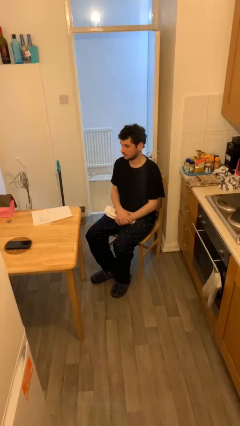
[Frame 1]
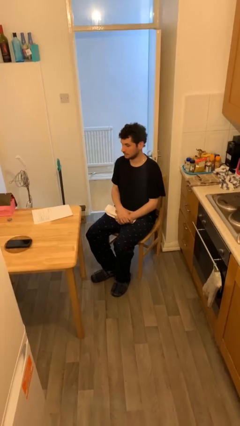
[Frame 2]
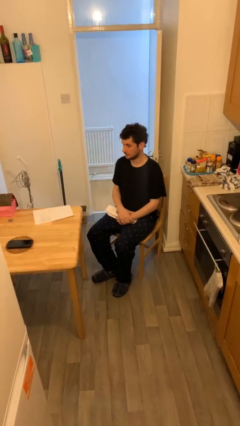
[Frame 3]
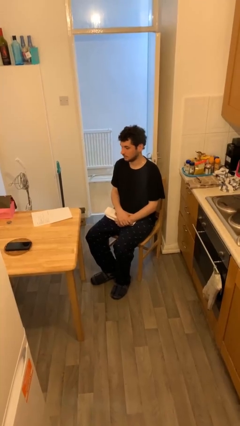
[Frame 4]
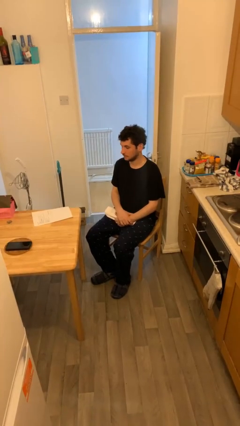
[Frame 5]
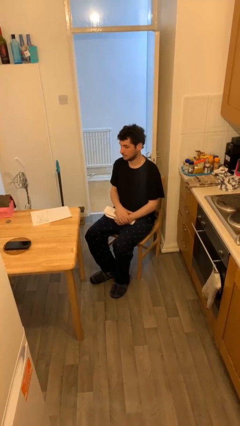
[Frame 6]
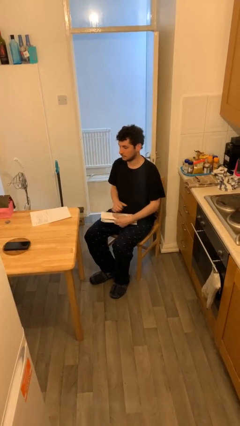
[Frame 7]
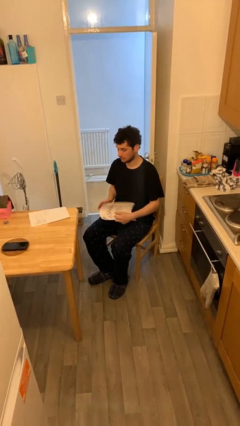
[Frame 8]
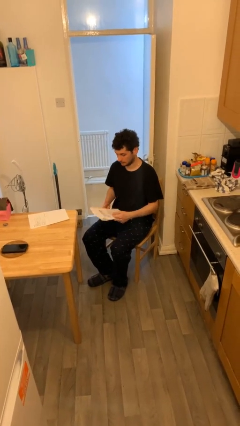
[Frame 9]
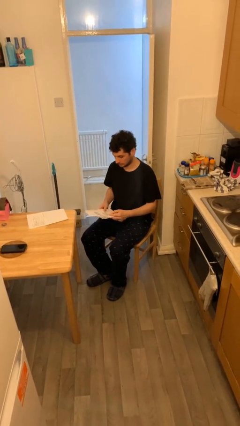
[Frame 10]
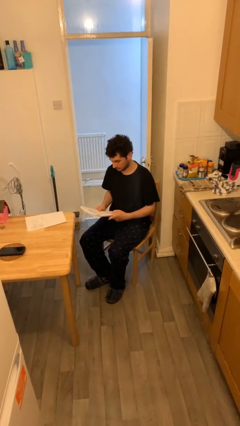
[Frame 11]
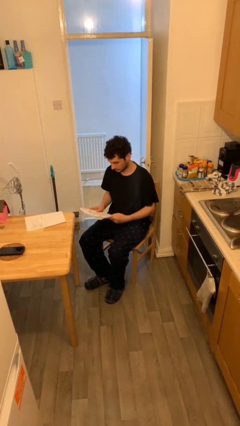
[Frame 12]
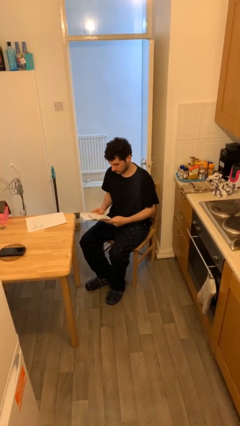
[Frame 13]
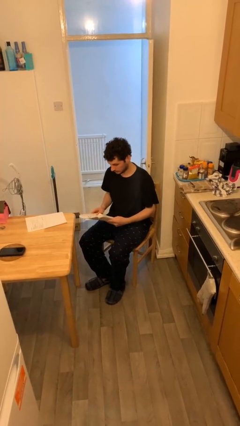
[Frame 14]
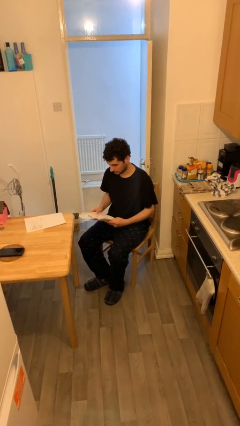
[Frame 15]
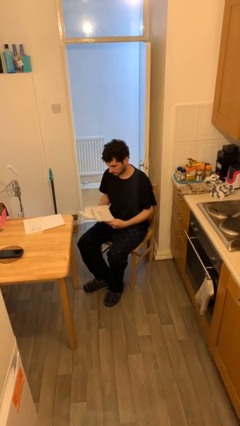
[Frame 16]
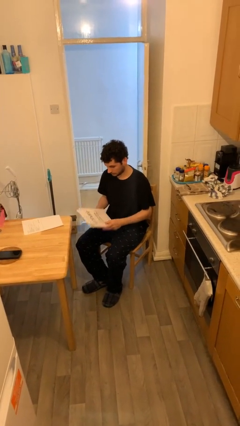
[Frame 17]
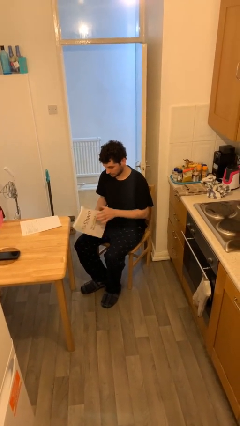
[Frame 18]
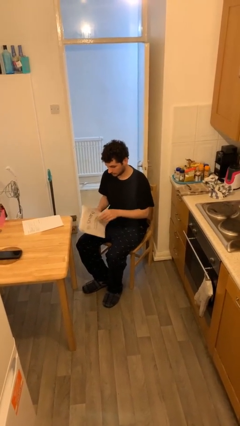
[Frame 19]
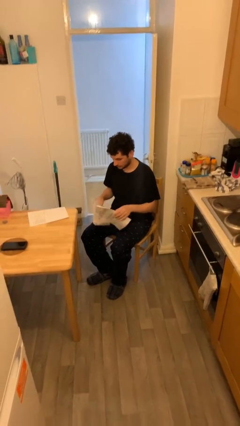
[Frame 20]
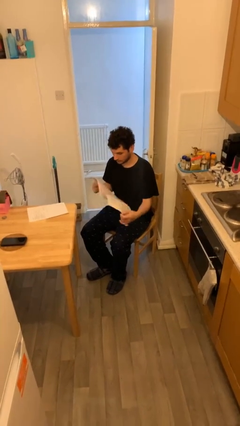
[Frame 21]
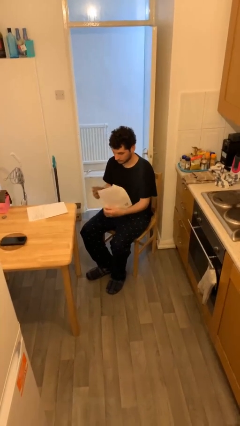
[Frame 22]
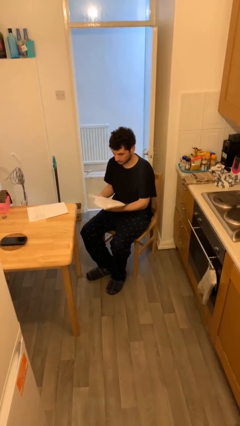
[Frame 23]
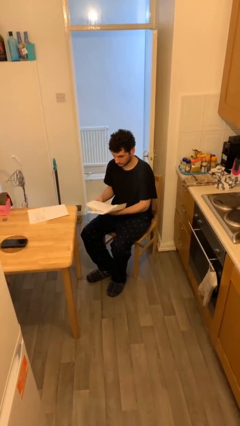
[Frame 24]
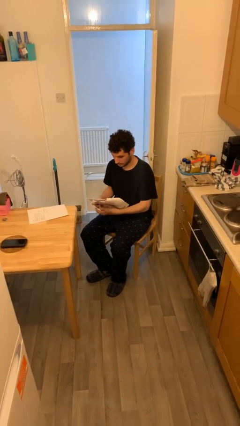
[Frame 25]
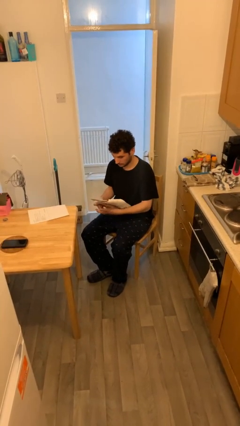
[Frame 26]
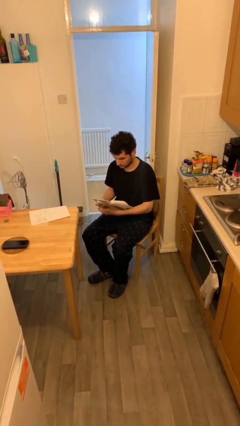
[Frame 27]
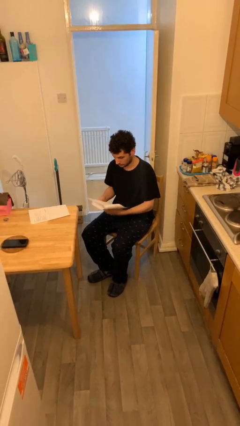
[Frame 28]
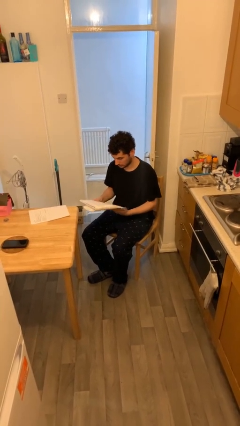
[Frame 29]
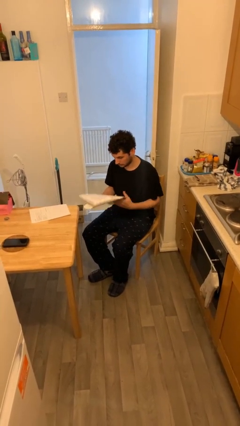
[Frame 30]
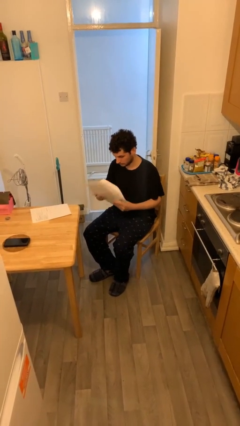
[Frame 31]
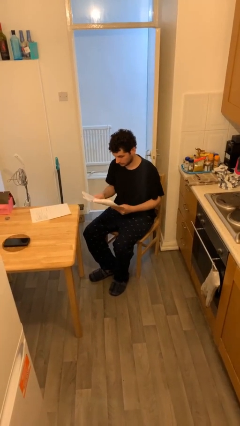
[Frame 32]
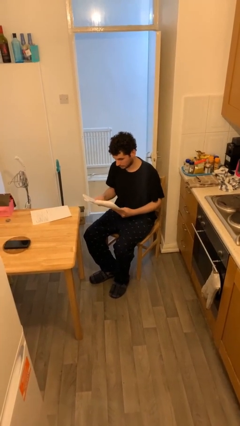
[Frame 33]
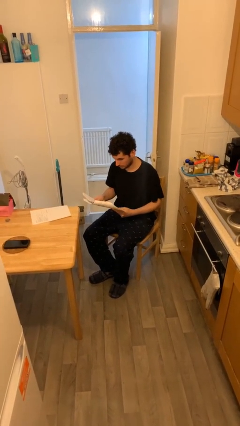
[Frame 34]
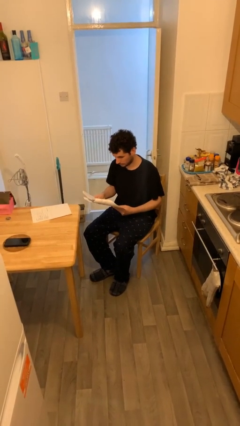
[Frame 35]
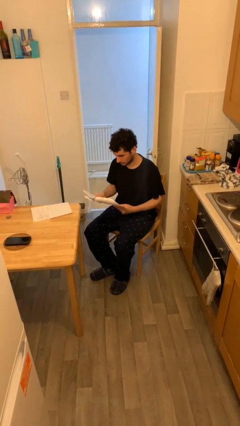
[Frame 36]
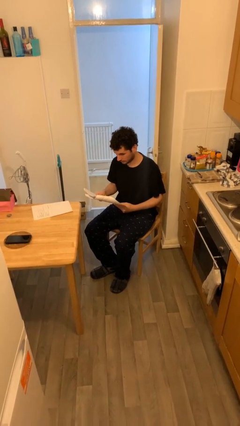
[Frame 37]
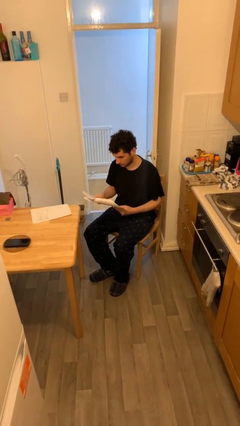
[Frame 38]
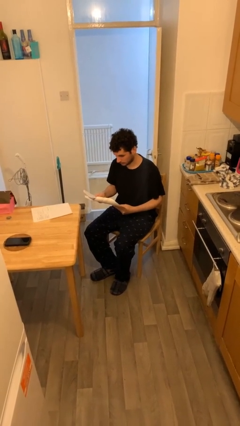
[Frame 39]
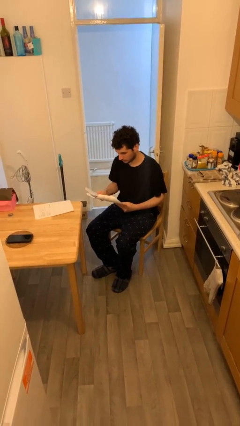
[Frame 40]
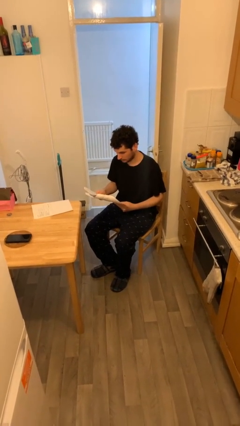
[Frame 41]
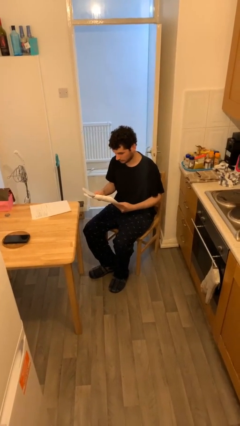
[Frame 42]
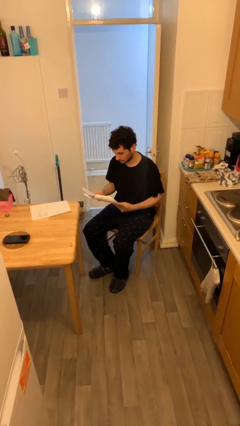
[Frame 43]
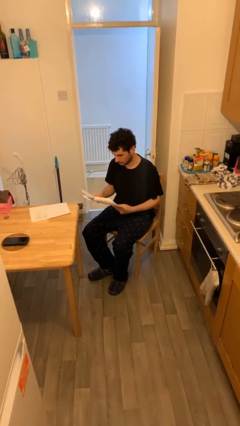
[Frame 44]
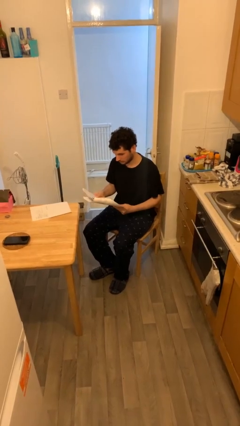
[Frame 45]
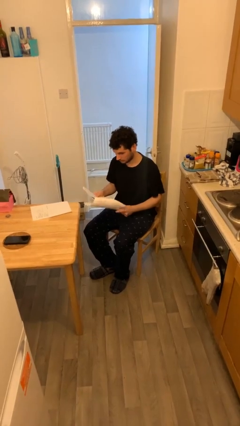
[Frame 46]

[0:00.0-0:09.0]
person reads document

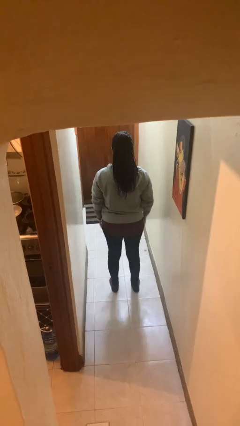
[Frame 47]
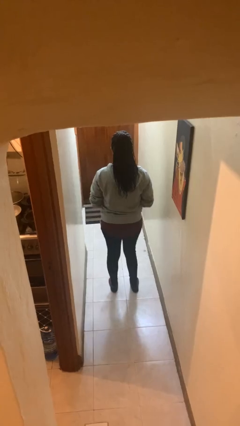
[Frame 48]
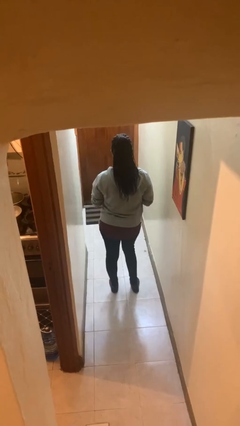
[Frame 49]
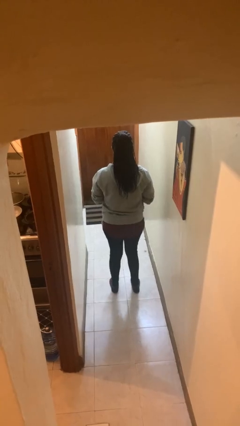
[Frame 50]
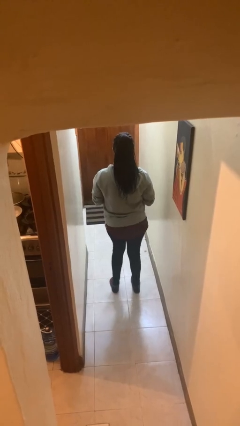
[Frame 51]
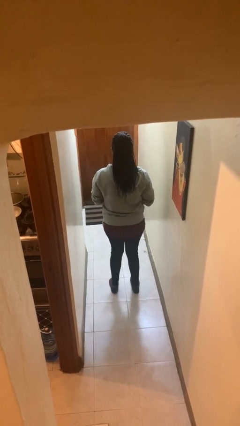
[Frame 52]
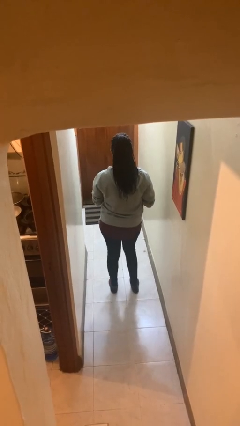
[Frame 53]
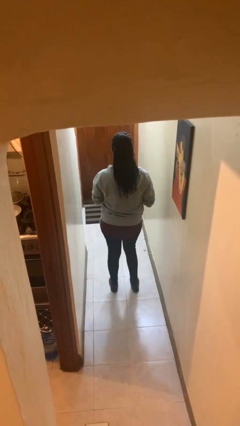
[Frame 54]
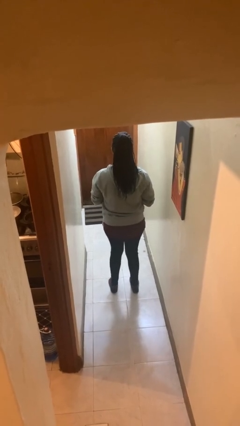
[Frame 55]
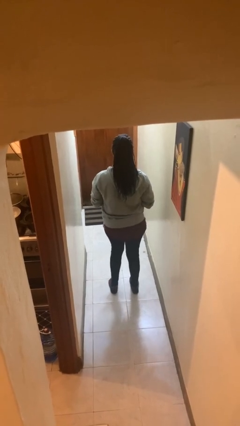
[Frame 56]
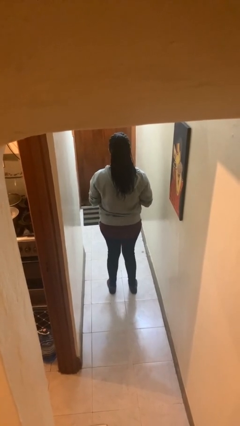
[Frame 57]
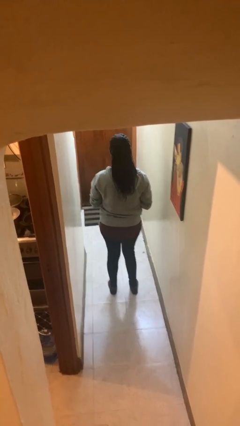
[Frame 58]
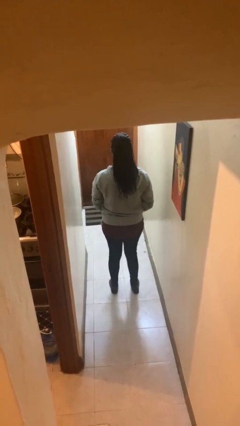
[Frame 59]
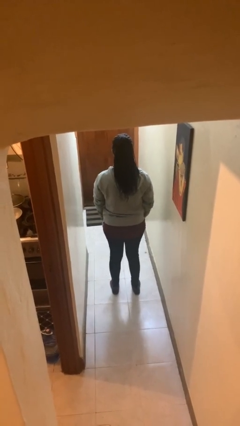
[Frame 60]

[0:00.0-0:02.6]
person wiggles hips

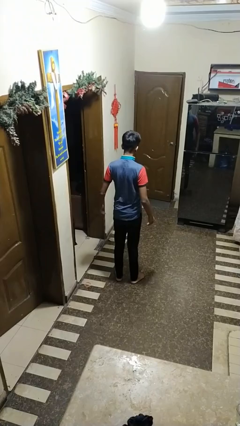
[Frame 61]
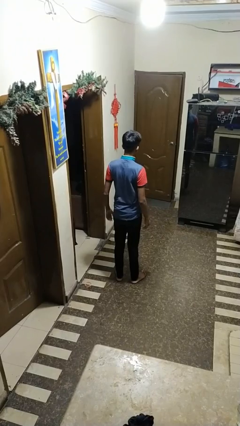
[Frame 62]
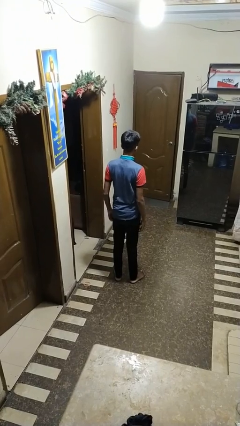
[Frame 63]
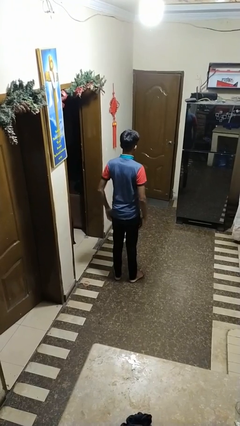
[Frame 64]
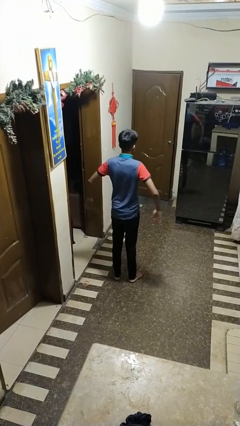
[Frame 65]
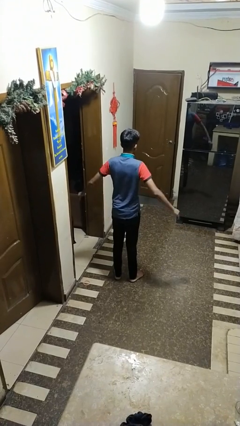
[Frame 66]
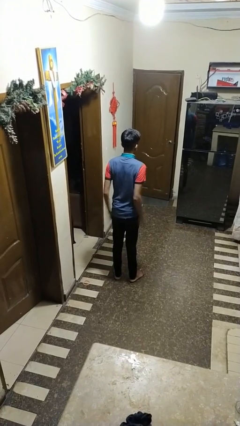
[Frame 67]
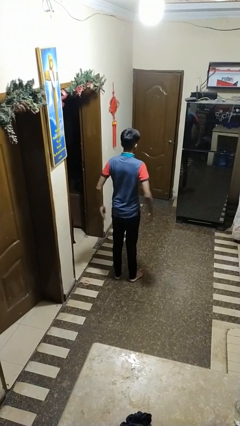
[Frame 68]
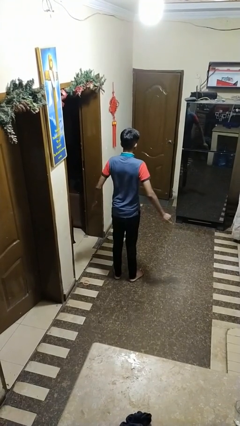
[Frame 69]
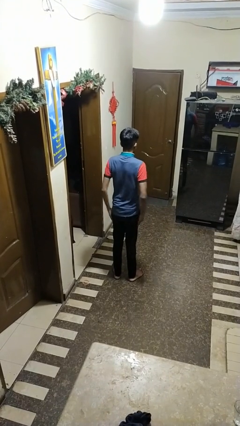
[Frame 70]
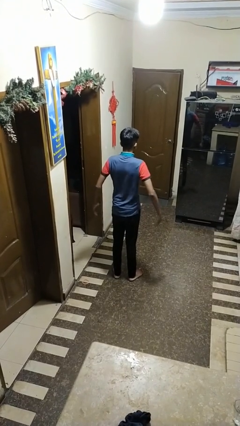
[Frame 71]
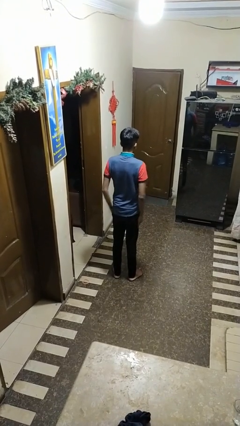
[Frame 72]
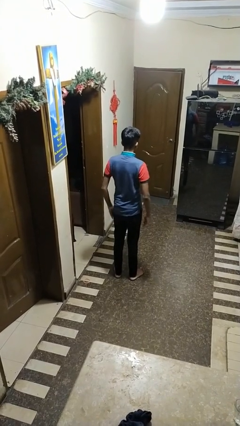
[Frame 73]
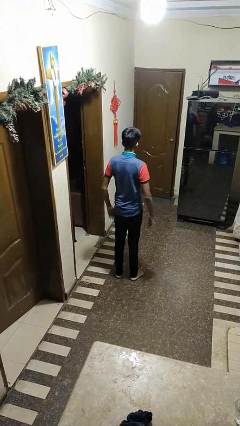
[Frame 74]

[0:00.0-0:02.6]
person slaps hands on thighs

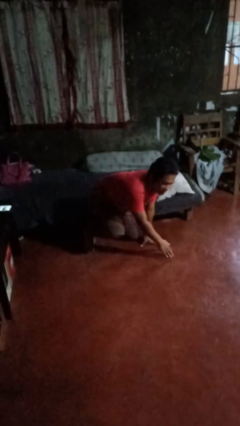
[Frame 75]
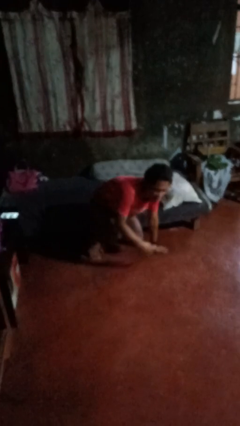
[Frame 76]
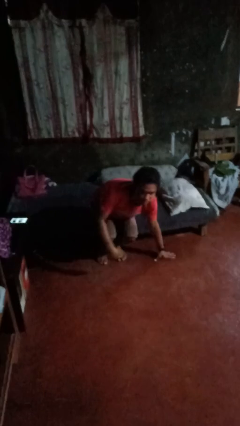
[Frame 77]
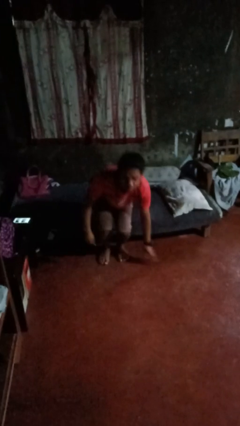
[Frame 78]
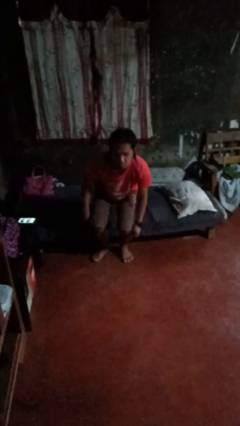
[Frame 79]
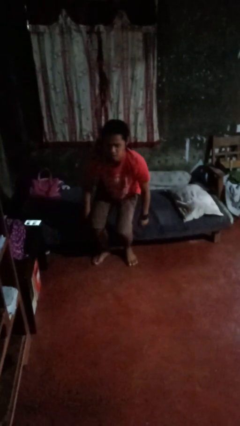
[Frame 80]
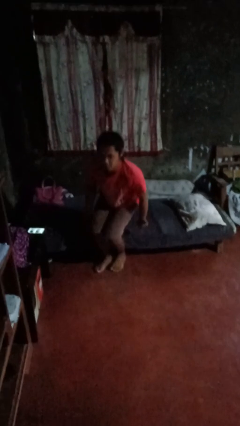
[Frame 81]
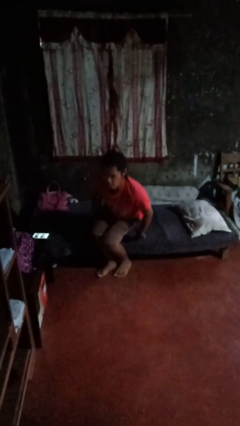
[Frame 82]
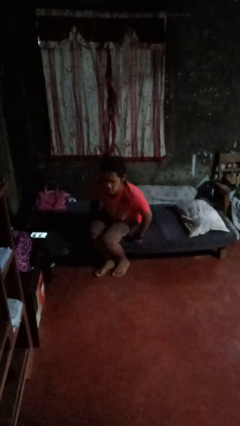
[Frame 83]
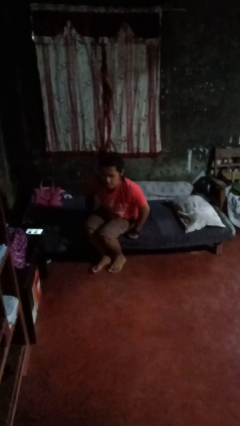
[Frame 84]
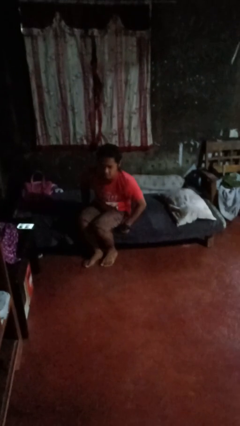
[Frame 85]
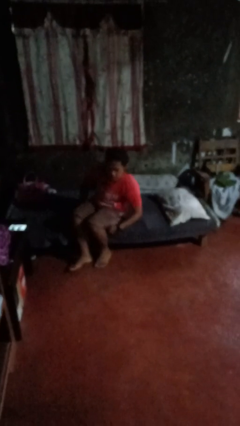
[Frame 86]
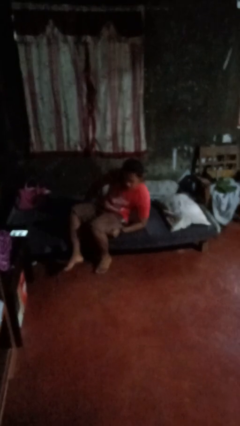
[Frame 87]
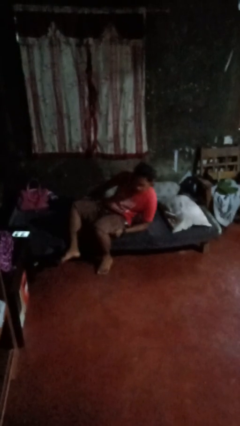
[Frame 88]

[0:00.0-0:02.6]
person stands up from floor

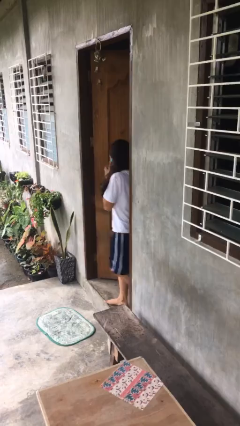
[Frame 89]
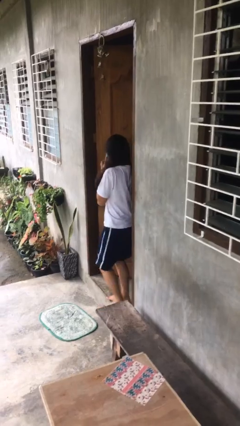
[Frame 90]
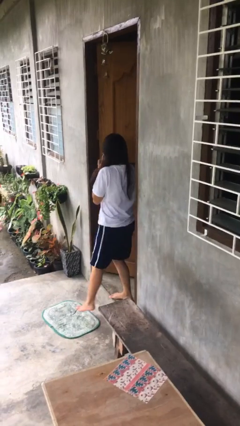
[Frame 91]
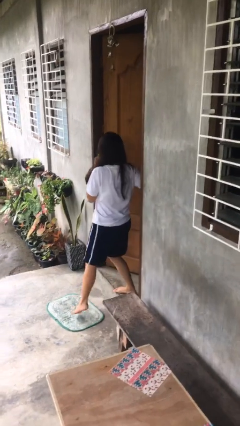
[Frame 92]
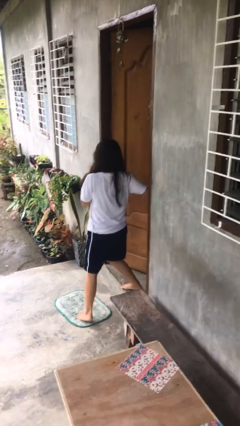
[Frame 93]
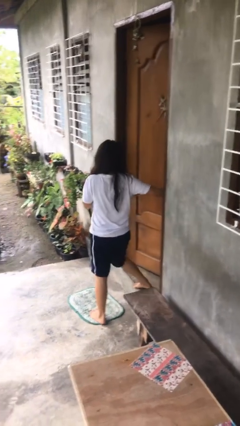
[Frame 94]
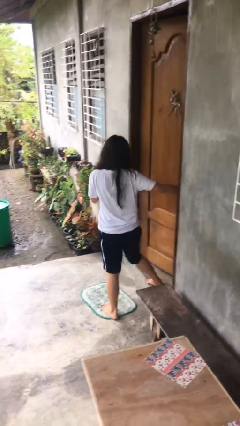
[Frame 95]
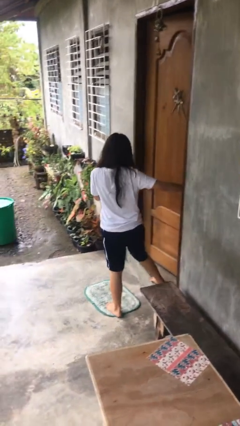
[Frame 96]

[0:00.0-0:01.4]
person enters scene through structure
